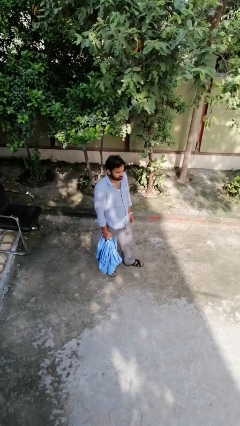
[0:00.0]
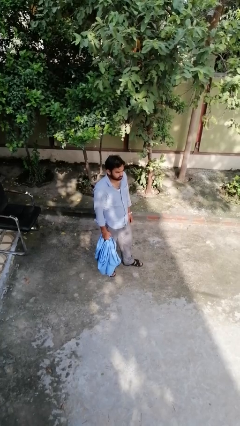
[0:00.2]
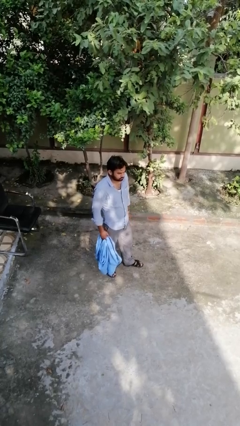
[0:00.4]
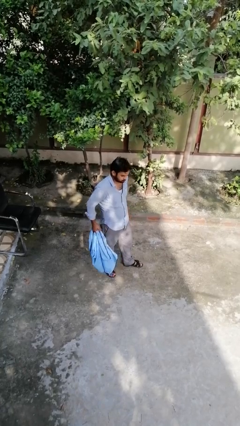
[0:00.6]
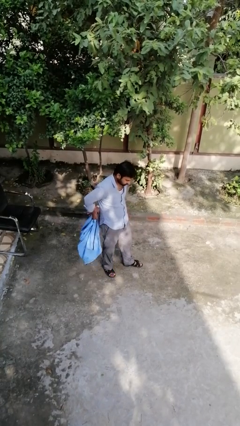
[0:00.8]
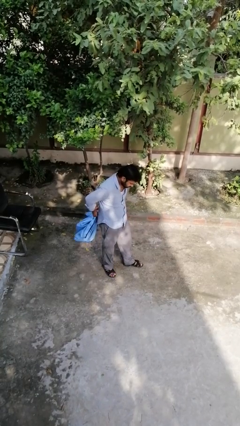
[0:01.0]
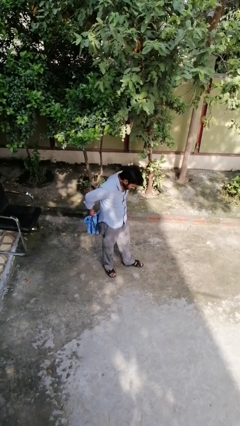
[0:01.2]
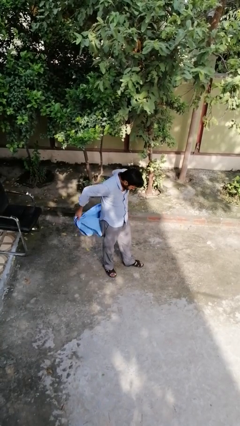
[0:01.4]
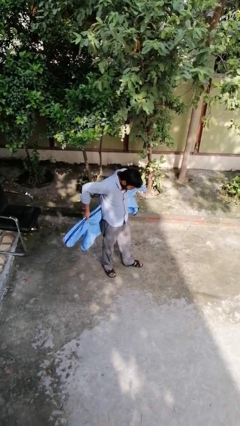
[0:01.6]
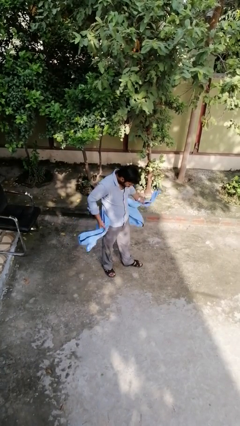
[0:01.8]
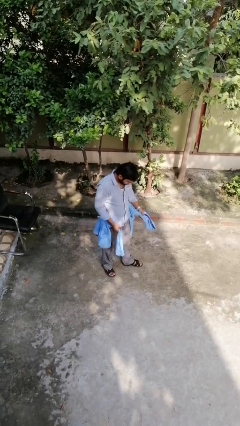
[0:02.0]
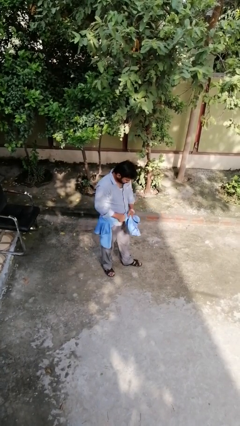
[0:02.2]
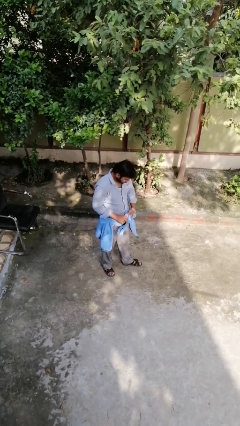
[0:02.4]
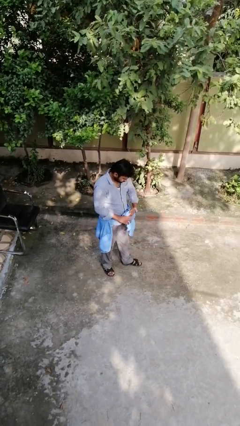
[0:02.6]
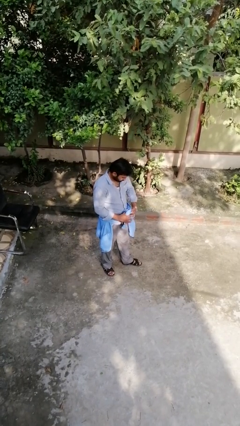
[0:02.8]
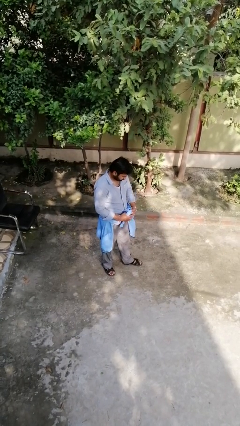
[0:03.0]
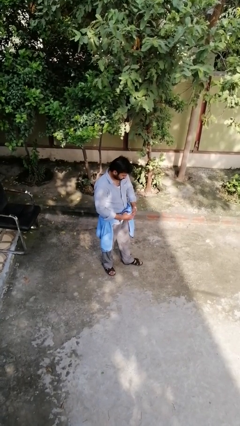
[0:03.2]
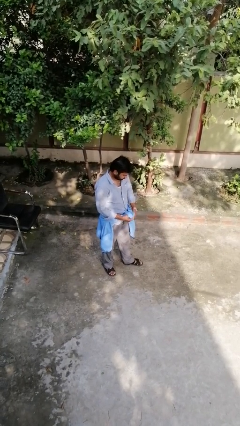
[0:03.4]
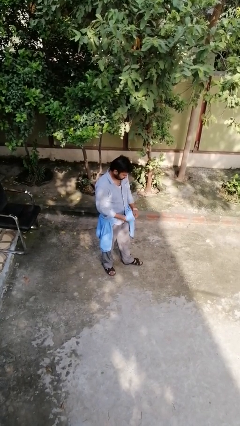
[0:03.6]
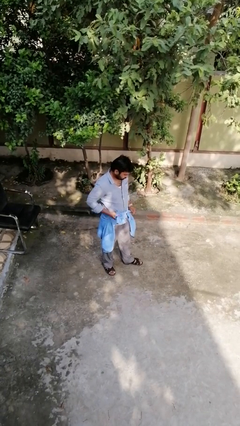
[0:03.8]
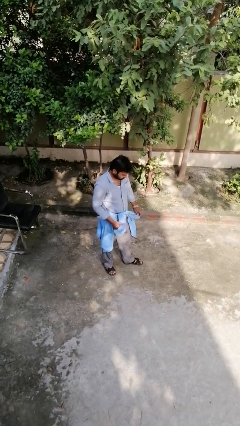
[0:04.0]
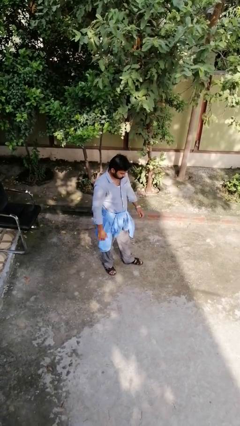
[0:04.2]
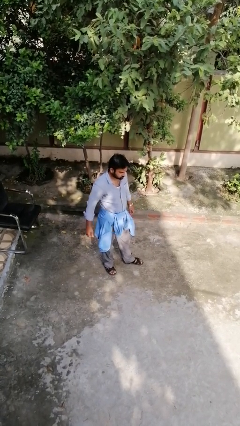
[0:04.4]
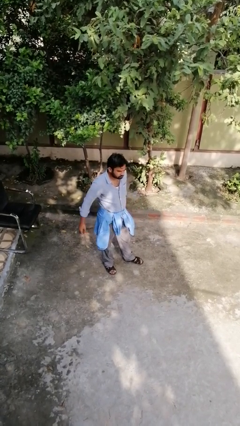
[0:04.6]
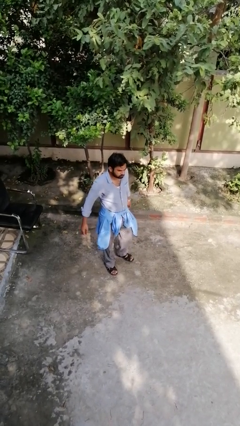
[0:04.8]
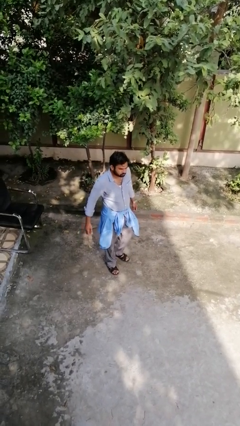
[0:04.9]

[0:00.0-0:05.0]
person ties jacket around waist

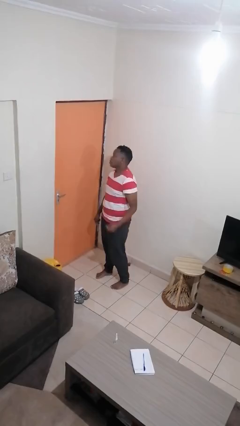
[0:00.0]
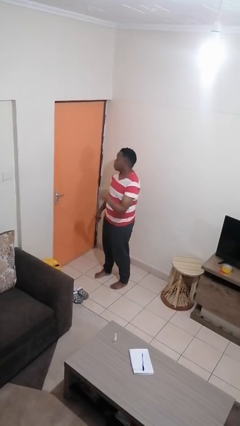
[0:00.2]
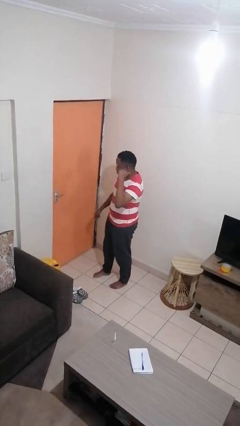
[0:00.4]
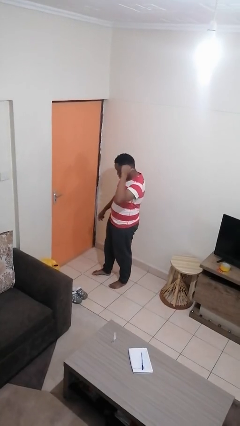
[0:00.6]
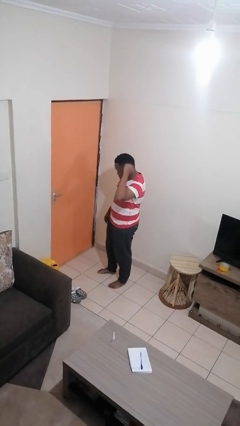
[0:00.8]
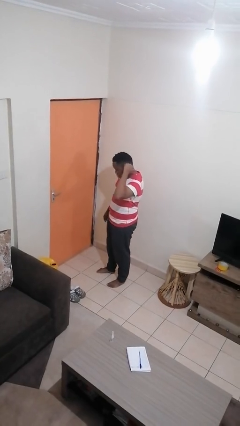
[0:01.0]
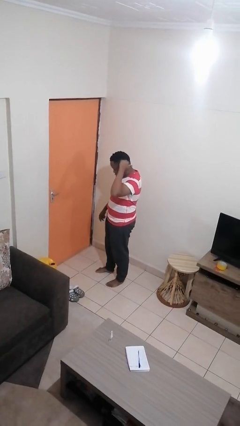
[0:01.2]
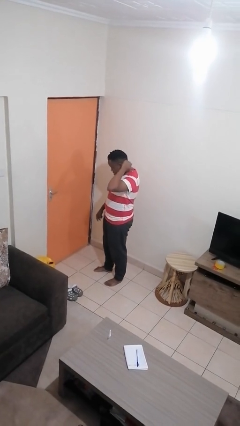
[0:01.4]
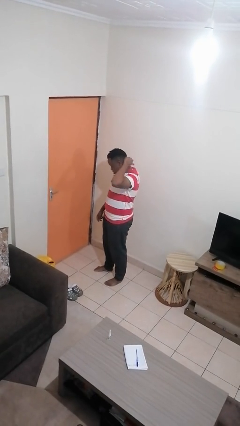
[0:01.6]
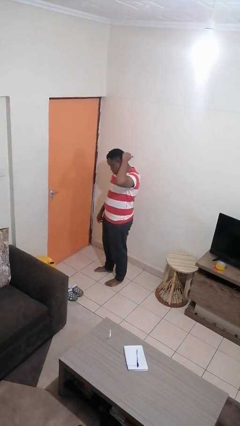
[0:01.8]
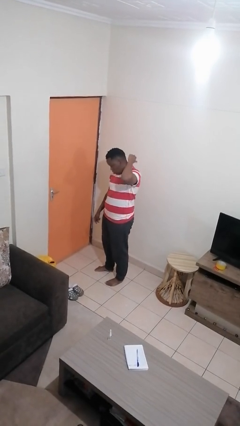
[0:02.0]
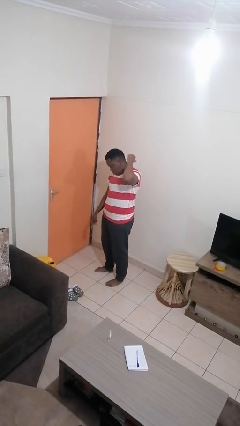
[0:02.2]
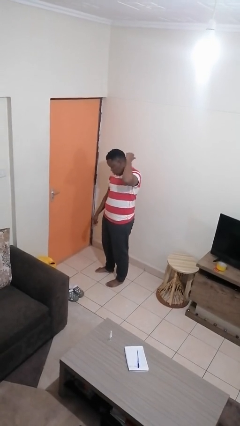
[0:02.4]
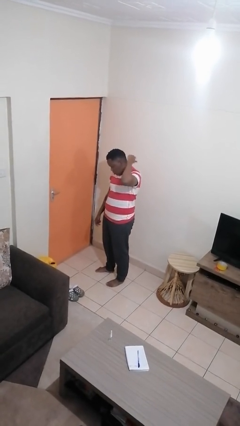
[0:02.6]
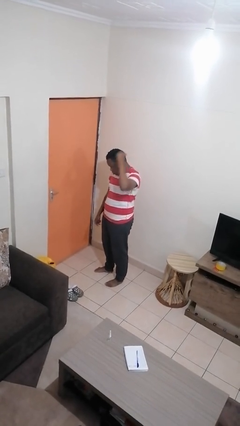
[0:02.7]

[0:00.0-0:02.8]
person gestures behind me

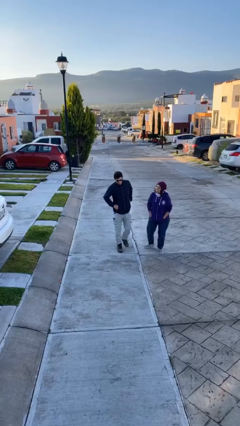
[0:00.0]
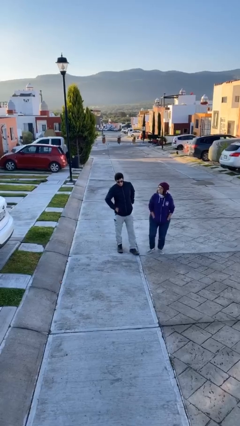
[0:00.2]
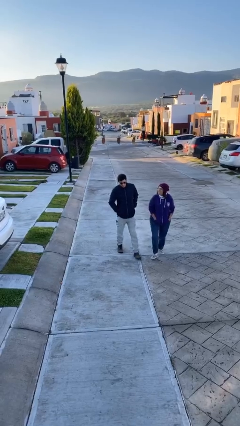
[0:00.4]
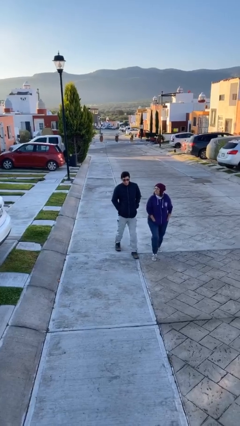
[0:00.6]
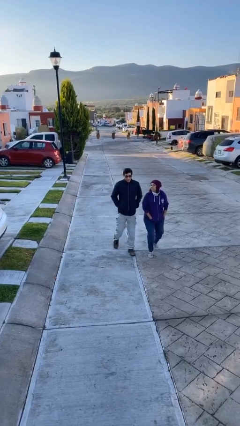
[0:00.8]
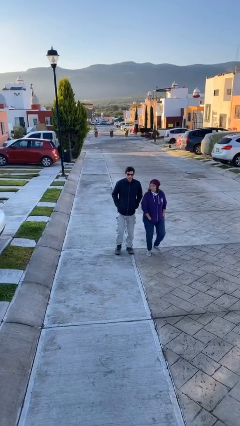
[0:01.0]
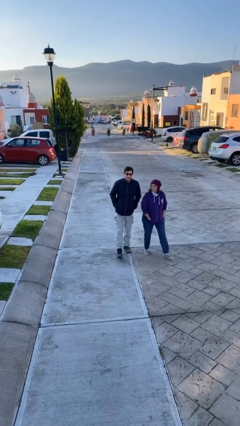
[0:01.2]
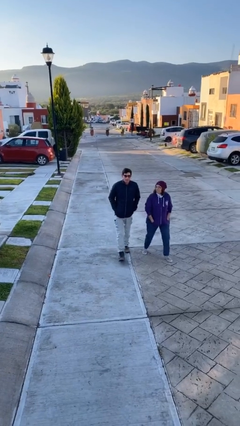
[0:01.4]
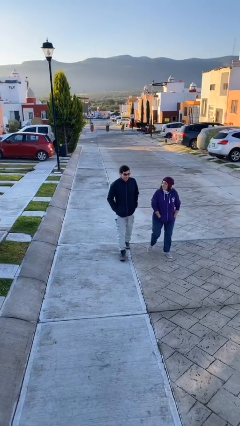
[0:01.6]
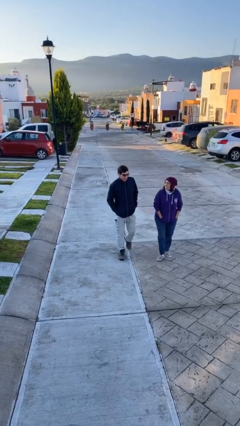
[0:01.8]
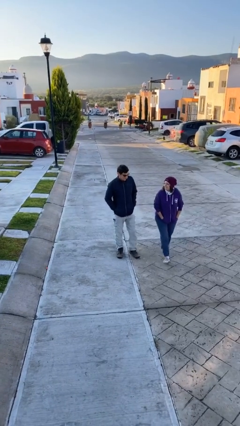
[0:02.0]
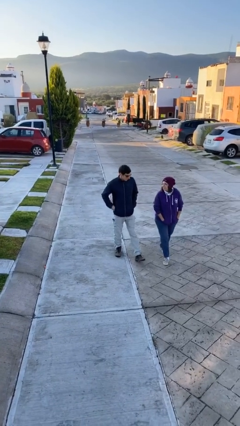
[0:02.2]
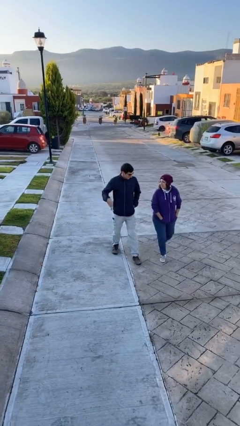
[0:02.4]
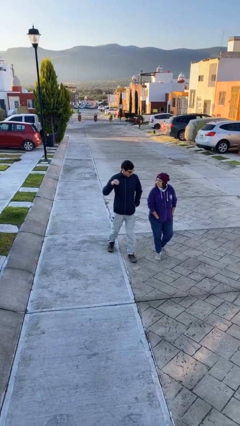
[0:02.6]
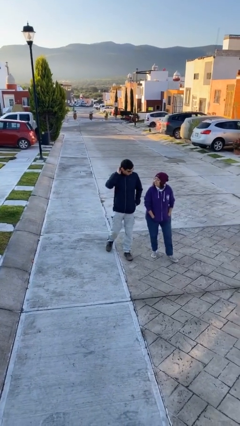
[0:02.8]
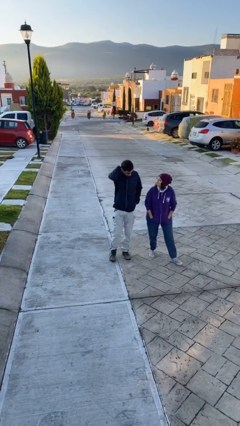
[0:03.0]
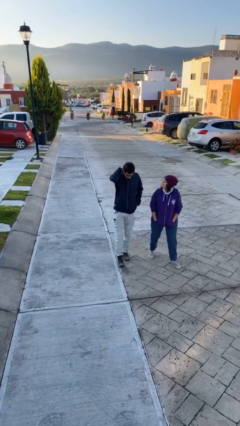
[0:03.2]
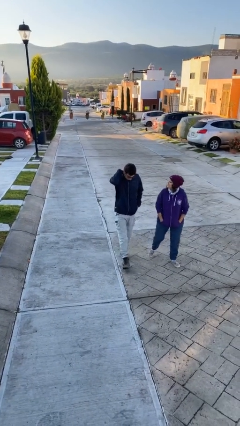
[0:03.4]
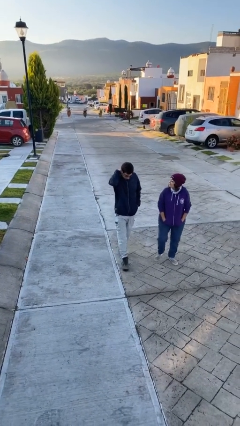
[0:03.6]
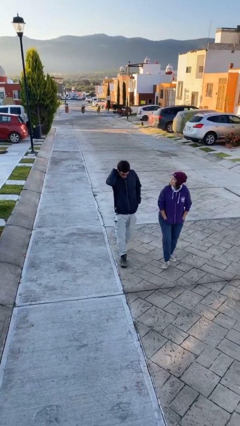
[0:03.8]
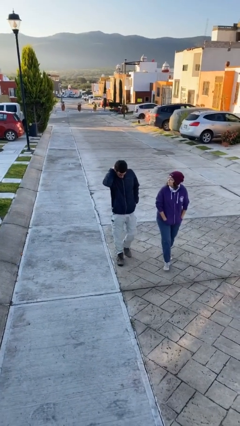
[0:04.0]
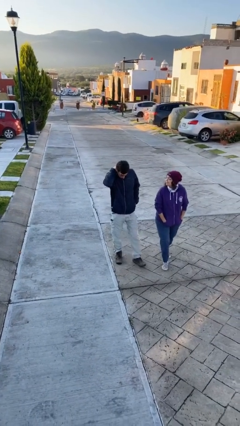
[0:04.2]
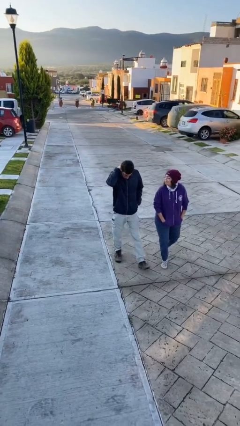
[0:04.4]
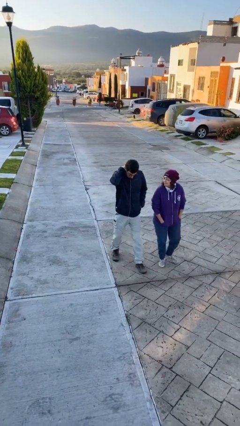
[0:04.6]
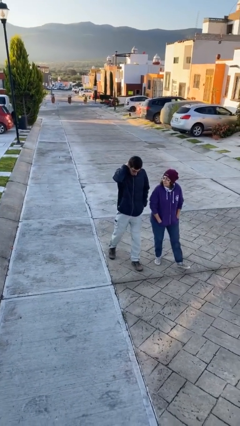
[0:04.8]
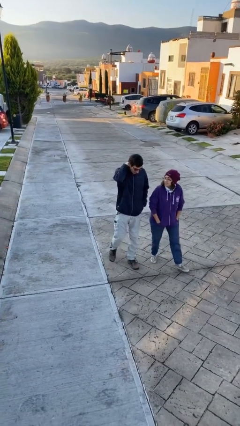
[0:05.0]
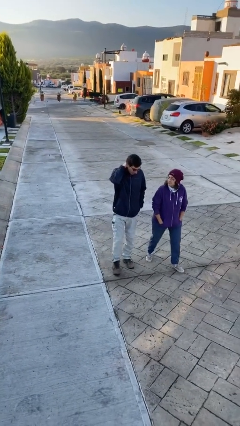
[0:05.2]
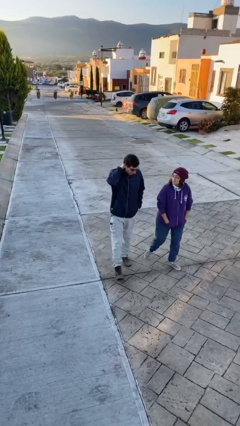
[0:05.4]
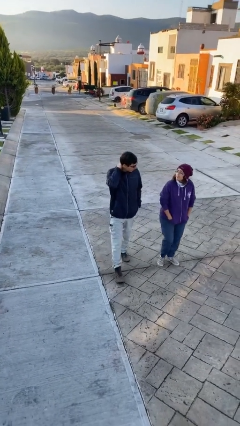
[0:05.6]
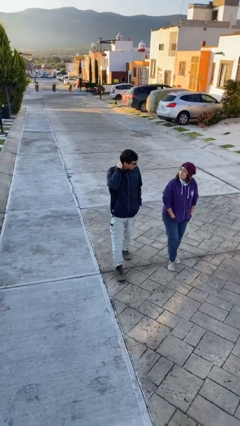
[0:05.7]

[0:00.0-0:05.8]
person talks to person

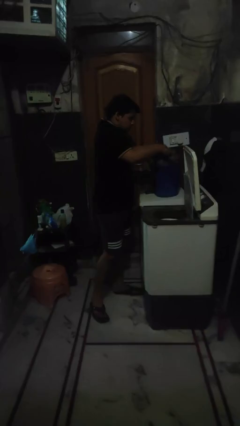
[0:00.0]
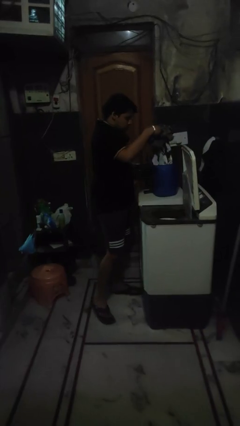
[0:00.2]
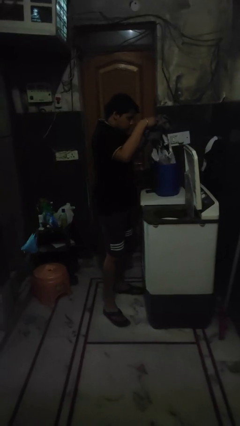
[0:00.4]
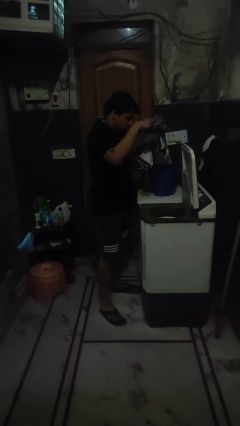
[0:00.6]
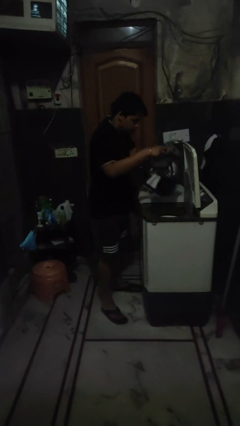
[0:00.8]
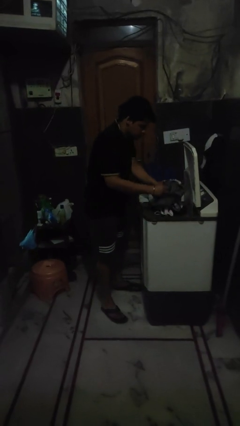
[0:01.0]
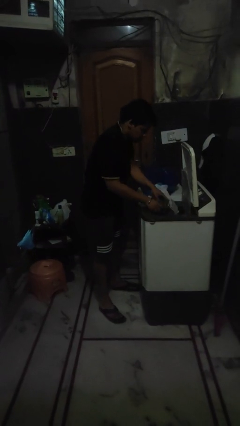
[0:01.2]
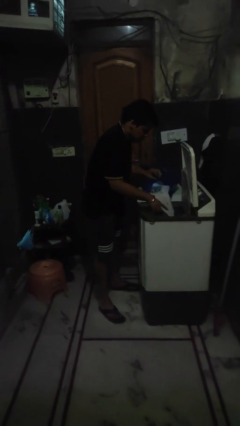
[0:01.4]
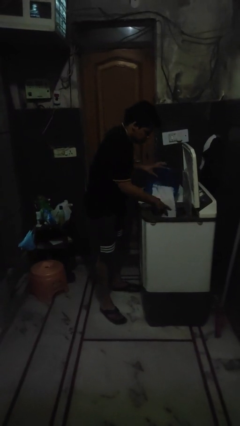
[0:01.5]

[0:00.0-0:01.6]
person loads clotheswasher

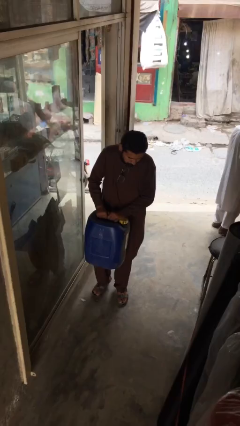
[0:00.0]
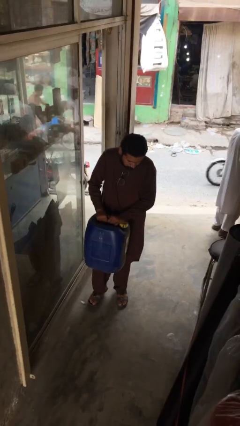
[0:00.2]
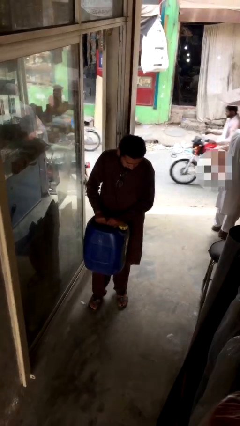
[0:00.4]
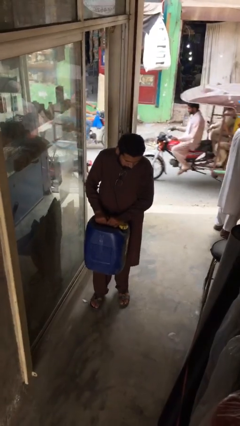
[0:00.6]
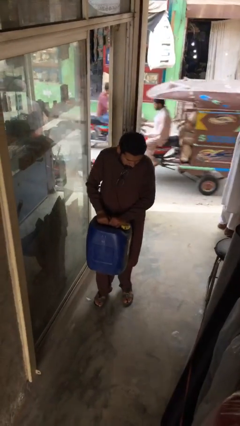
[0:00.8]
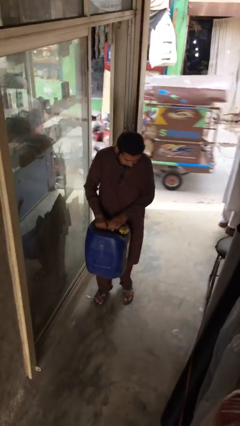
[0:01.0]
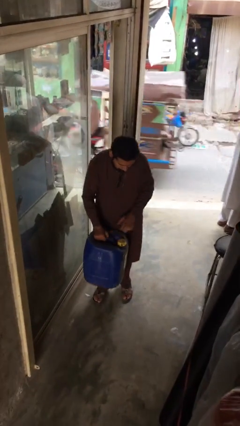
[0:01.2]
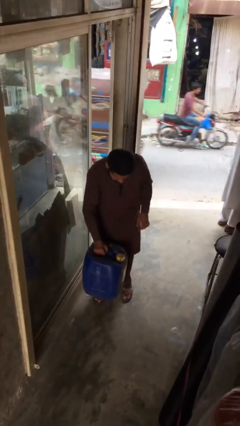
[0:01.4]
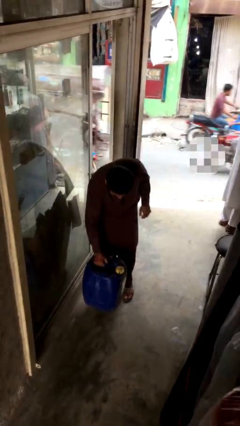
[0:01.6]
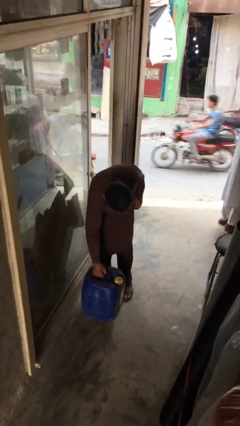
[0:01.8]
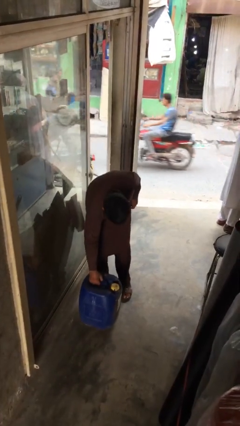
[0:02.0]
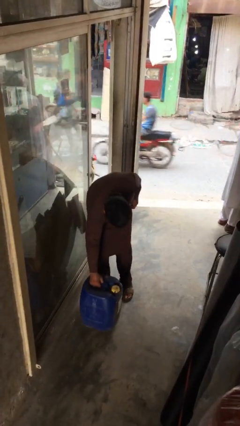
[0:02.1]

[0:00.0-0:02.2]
person puts down object on floor

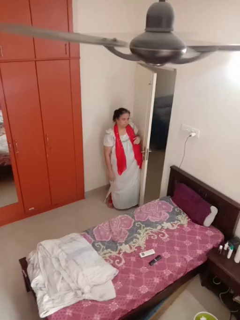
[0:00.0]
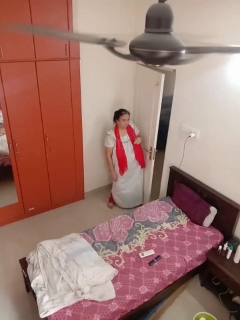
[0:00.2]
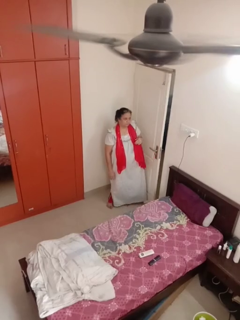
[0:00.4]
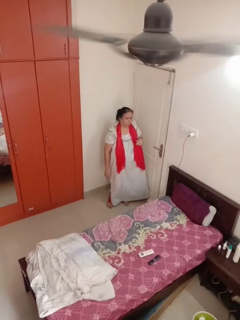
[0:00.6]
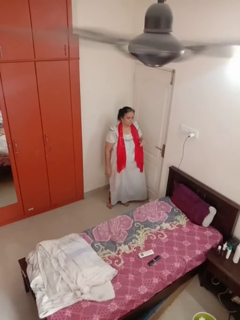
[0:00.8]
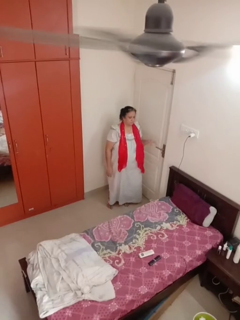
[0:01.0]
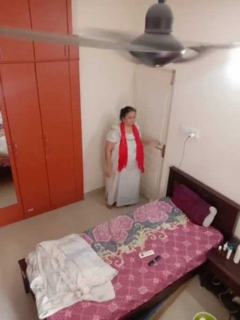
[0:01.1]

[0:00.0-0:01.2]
person closes door with hip
